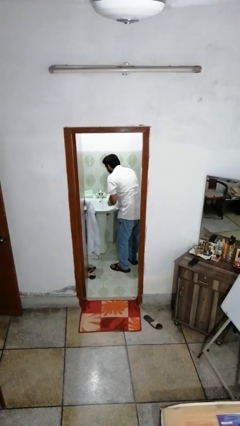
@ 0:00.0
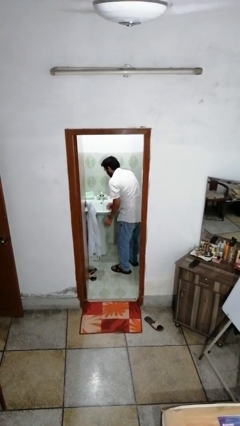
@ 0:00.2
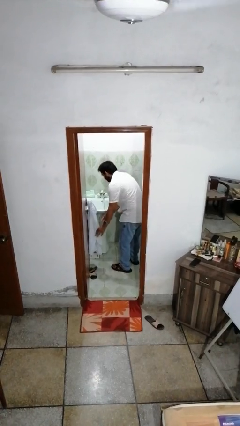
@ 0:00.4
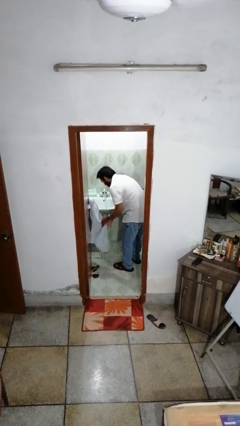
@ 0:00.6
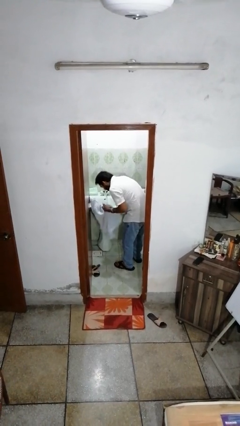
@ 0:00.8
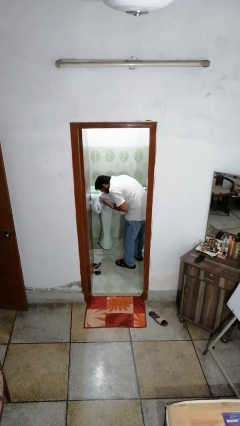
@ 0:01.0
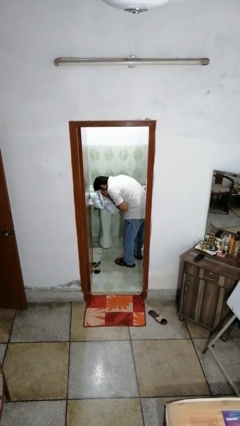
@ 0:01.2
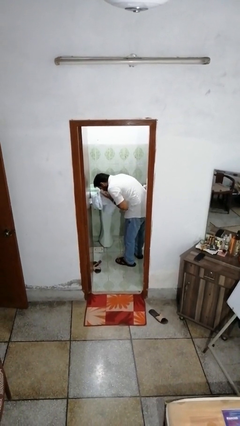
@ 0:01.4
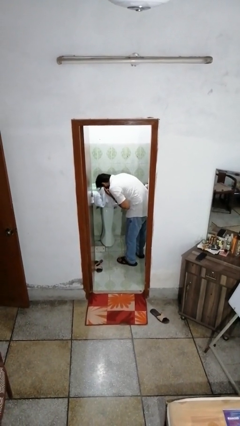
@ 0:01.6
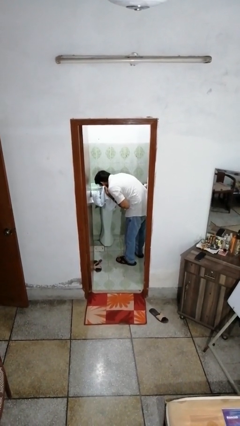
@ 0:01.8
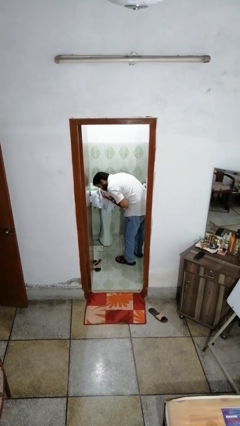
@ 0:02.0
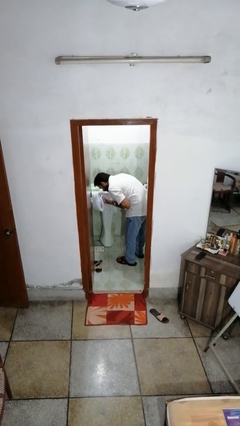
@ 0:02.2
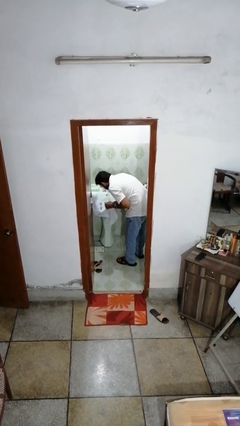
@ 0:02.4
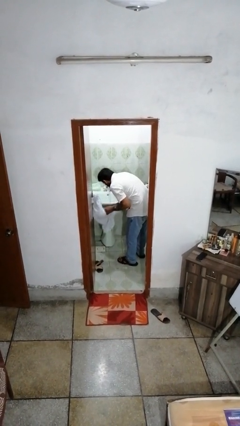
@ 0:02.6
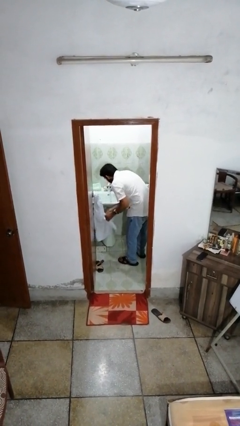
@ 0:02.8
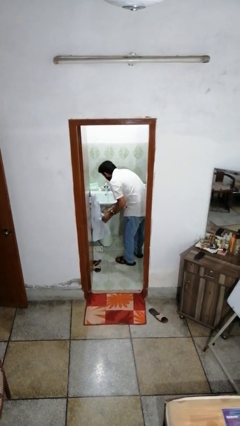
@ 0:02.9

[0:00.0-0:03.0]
person dries face with towel

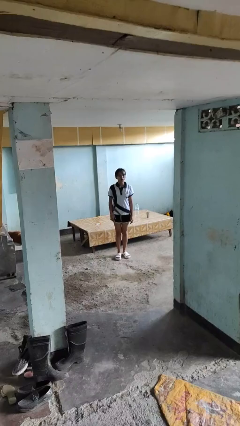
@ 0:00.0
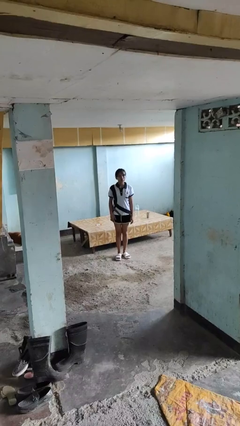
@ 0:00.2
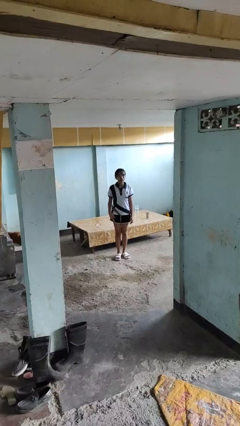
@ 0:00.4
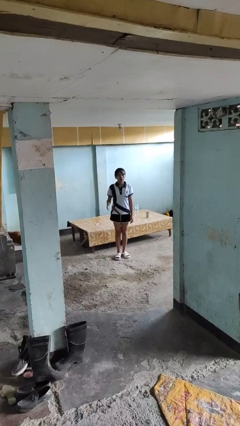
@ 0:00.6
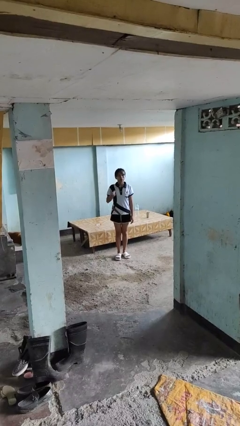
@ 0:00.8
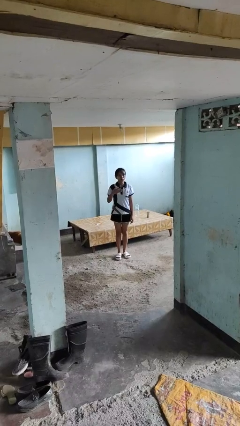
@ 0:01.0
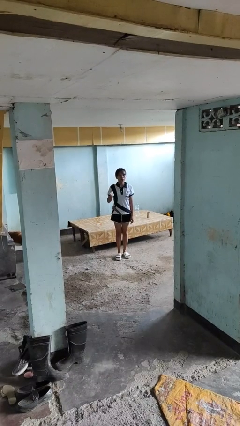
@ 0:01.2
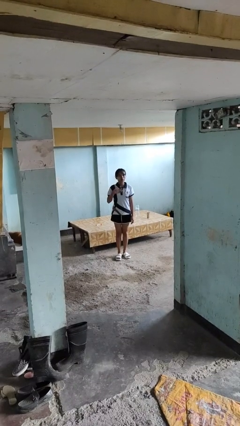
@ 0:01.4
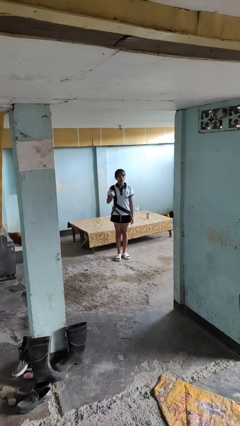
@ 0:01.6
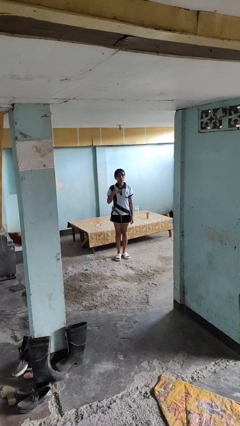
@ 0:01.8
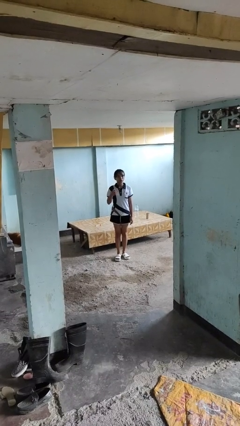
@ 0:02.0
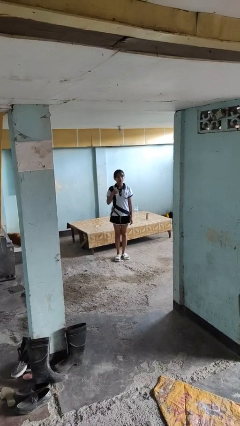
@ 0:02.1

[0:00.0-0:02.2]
person drums on chest

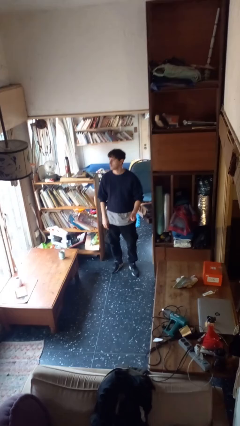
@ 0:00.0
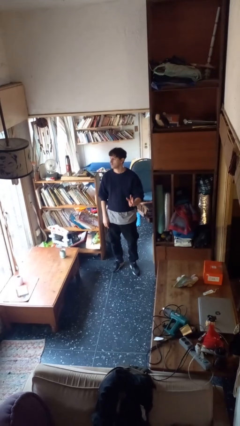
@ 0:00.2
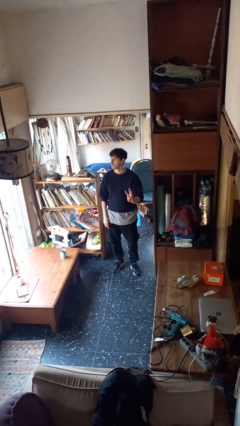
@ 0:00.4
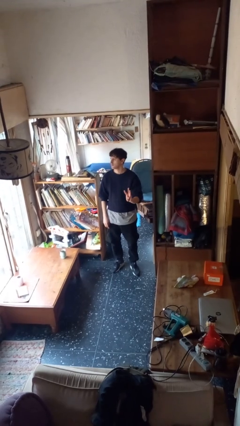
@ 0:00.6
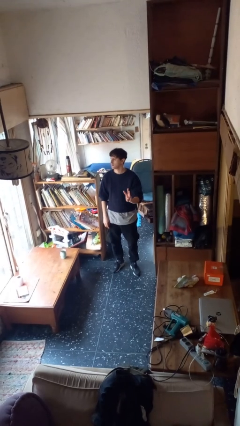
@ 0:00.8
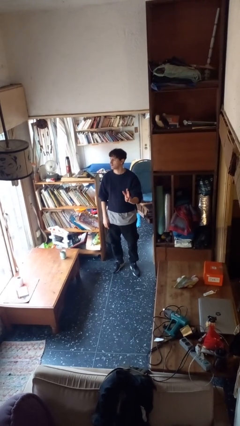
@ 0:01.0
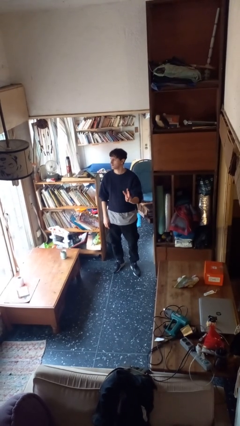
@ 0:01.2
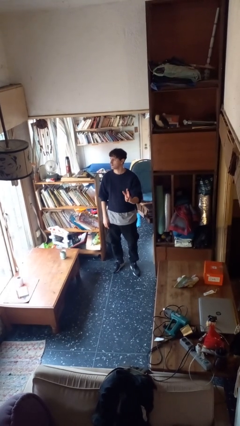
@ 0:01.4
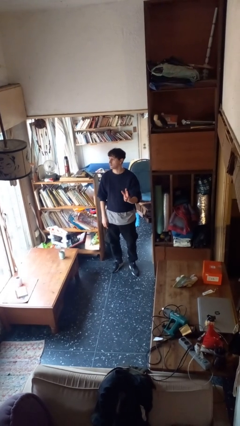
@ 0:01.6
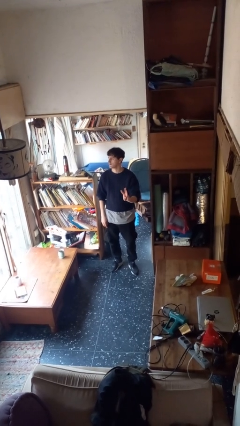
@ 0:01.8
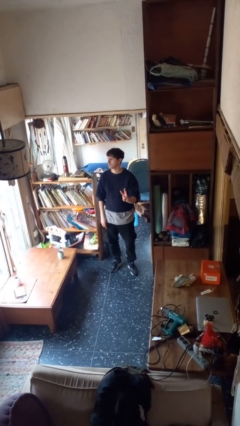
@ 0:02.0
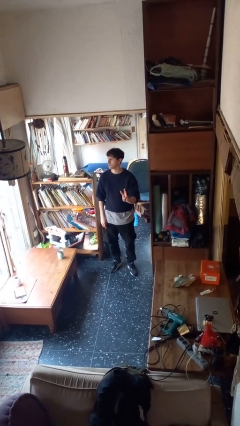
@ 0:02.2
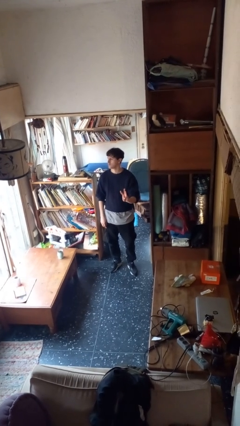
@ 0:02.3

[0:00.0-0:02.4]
person gestures number three

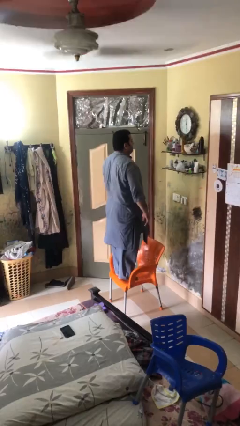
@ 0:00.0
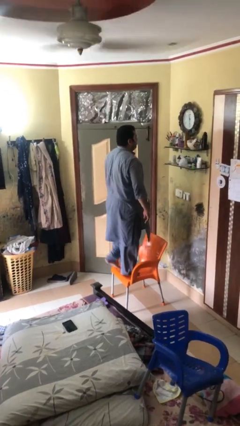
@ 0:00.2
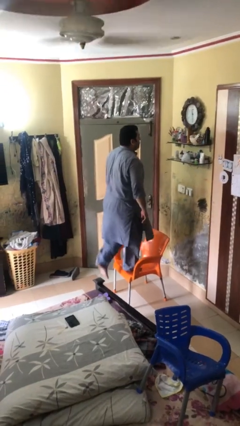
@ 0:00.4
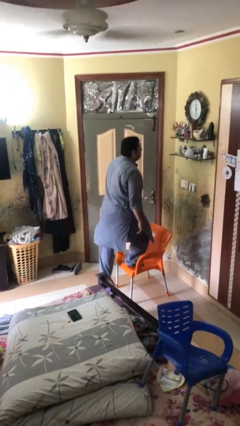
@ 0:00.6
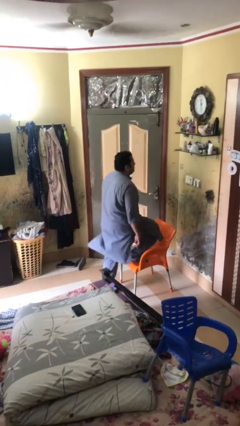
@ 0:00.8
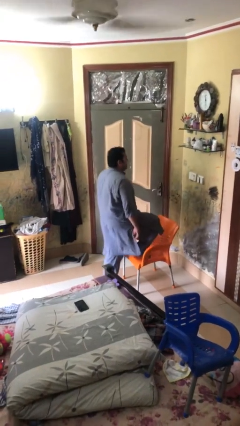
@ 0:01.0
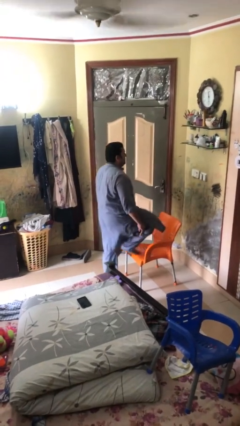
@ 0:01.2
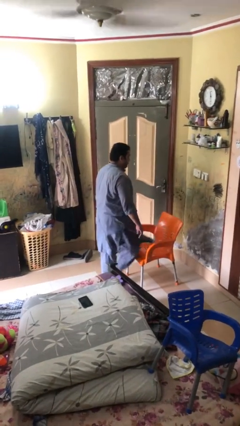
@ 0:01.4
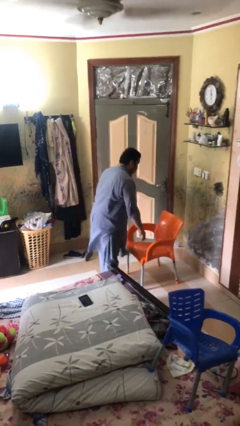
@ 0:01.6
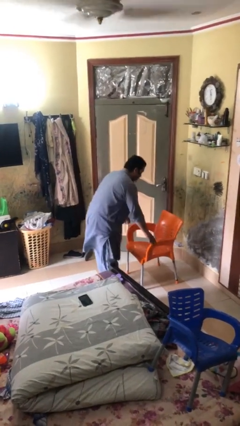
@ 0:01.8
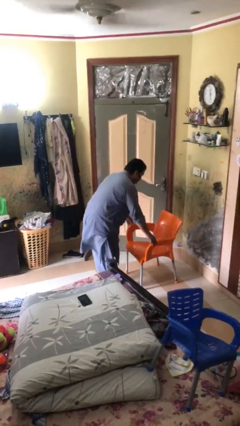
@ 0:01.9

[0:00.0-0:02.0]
person climbs off chair

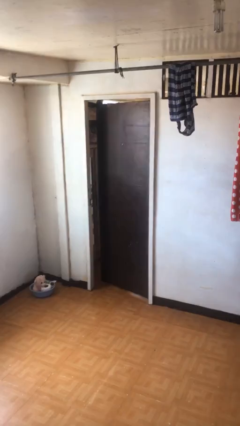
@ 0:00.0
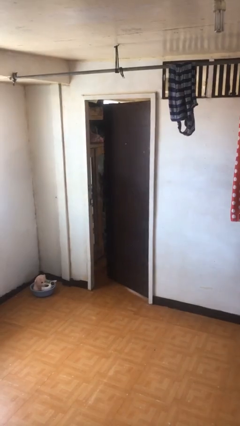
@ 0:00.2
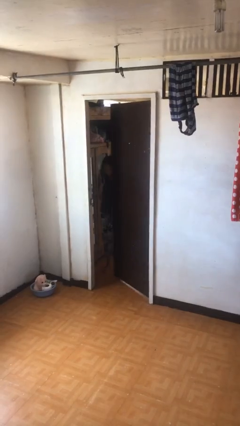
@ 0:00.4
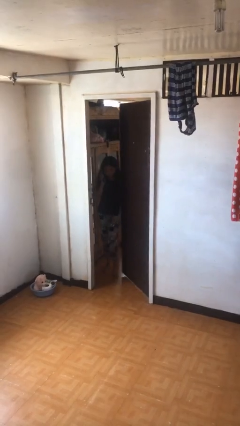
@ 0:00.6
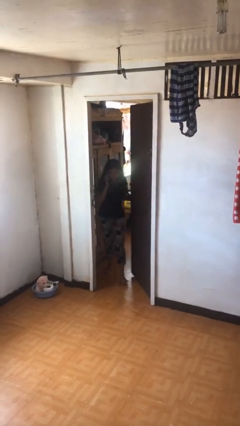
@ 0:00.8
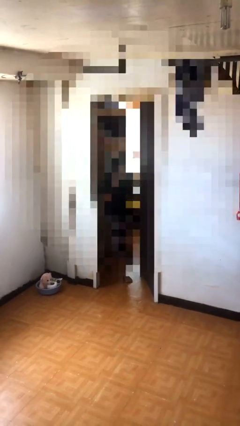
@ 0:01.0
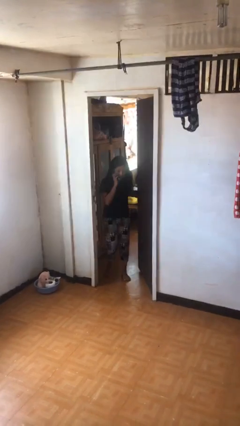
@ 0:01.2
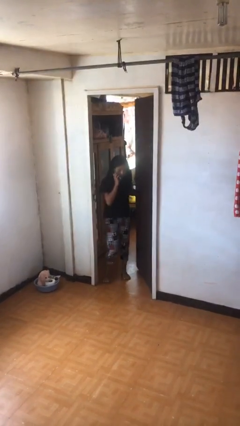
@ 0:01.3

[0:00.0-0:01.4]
person opens facility door

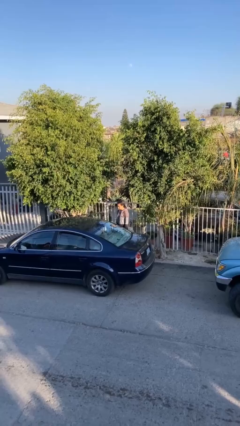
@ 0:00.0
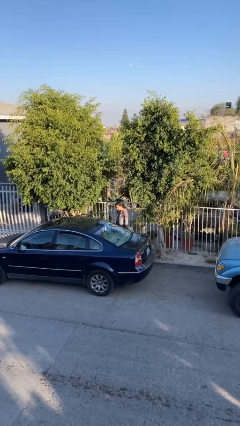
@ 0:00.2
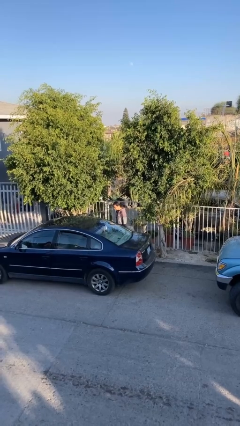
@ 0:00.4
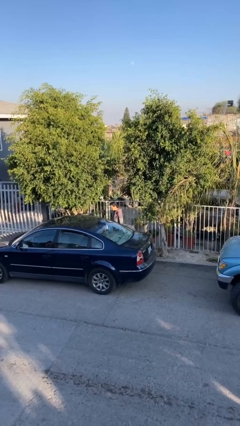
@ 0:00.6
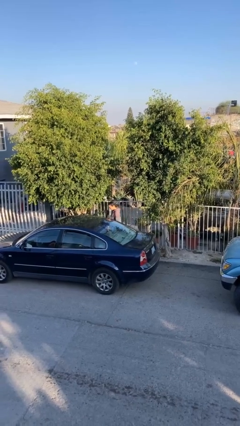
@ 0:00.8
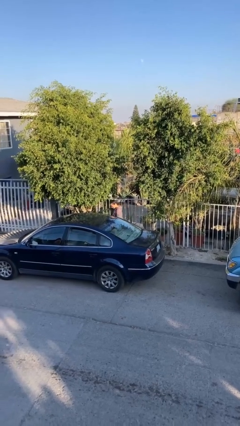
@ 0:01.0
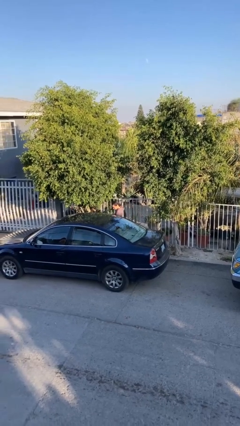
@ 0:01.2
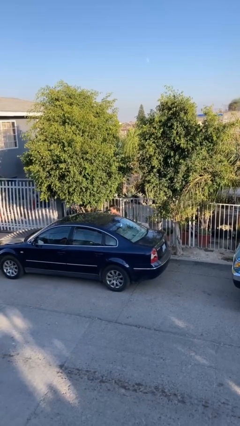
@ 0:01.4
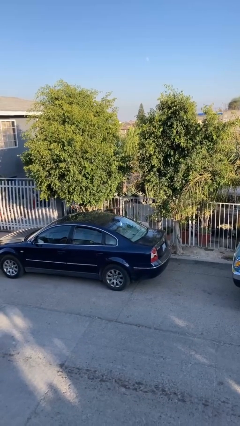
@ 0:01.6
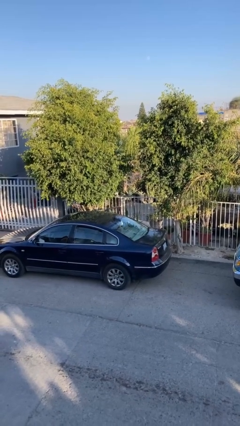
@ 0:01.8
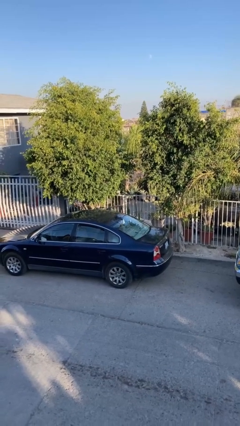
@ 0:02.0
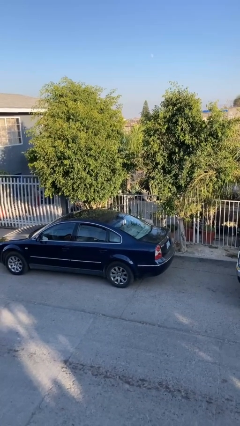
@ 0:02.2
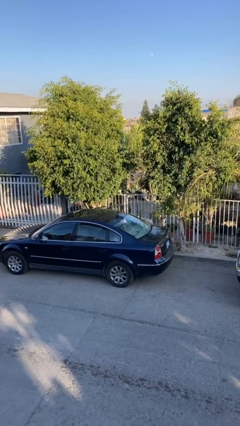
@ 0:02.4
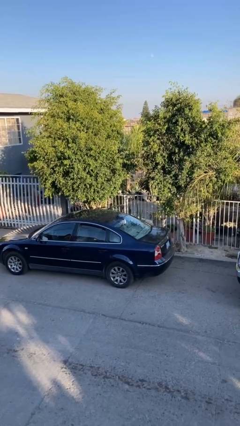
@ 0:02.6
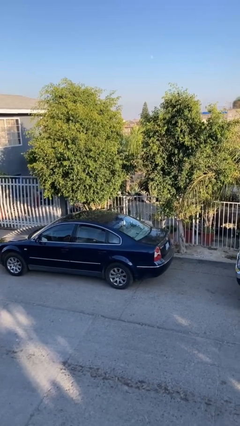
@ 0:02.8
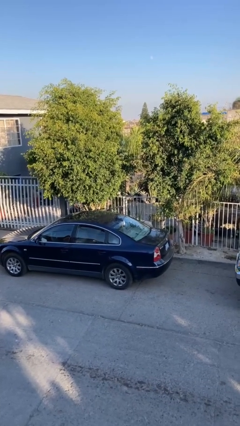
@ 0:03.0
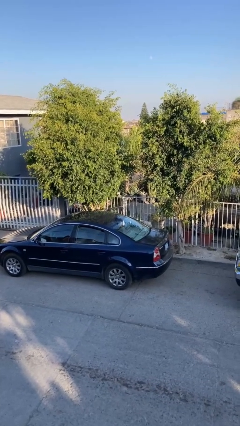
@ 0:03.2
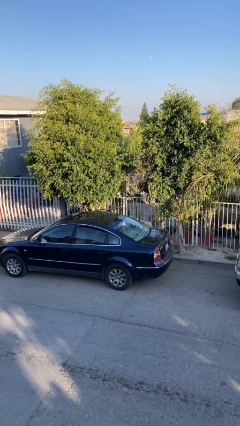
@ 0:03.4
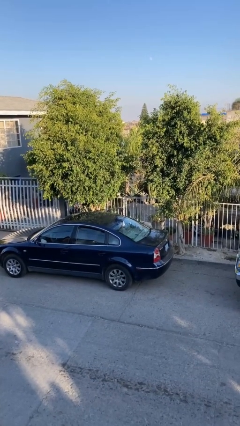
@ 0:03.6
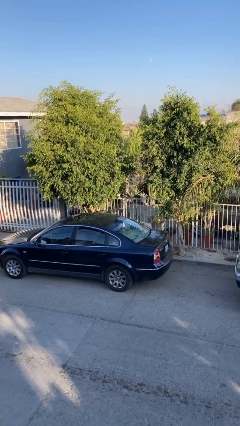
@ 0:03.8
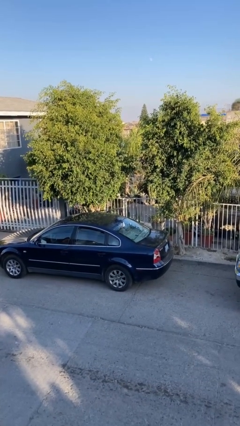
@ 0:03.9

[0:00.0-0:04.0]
person enters car

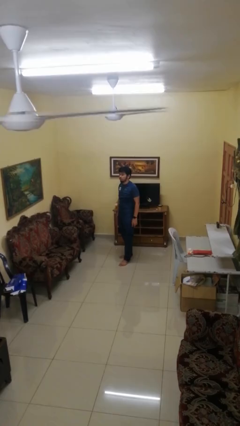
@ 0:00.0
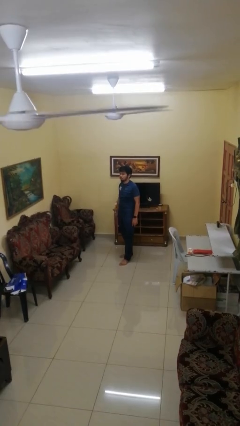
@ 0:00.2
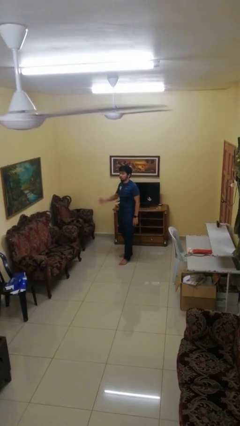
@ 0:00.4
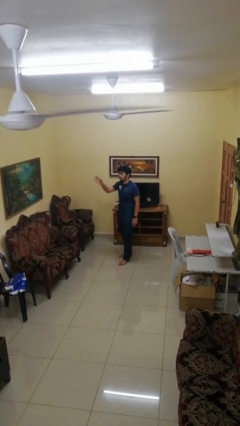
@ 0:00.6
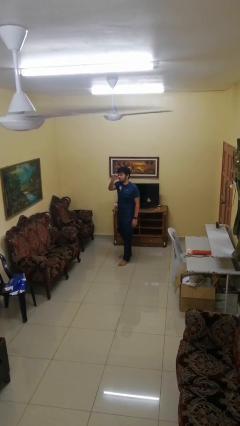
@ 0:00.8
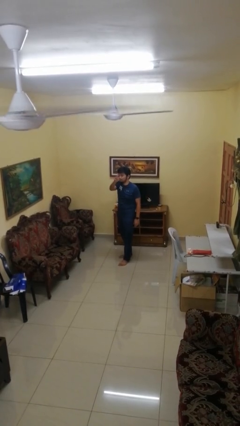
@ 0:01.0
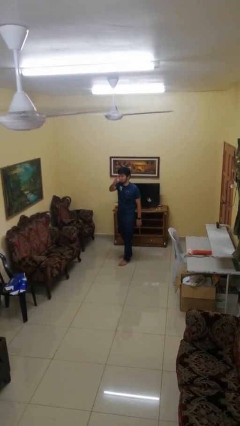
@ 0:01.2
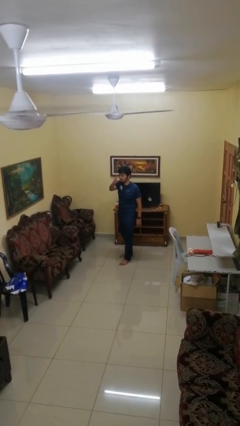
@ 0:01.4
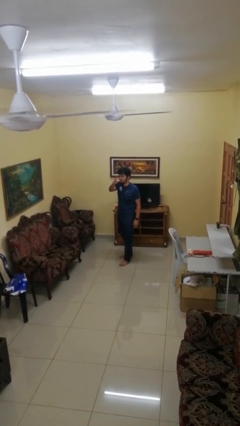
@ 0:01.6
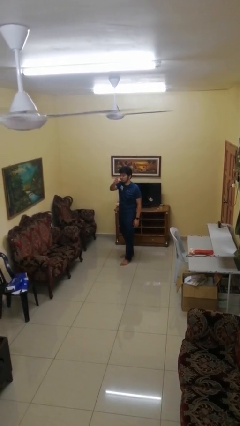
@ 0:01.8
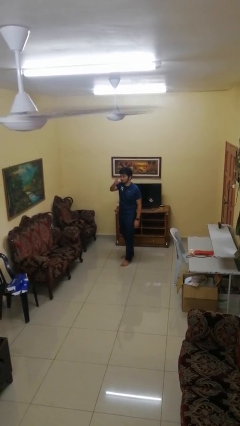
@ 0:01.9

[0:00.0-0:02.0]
person gestures swipe left
